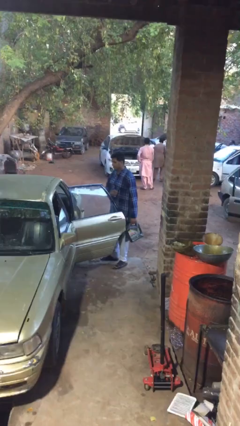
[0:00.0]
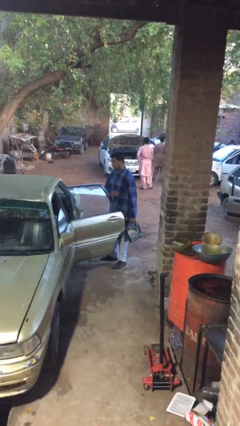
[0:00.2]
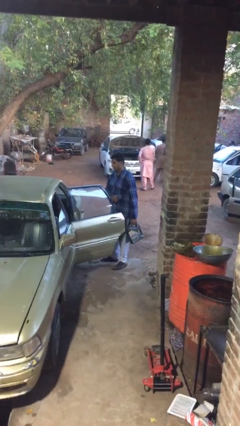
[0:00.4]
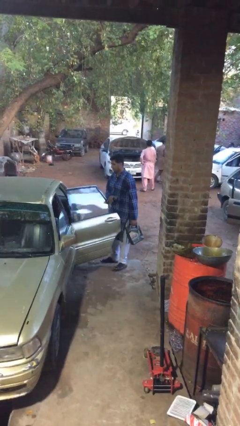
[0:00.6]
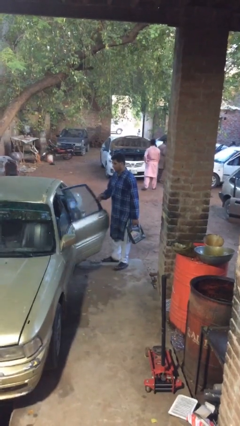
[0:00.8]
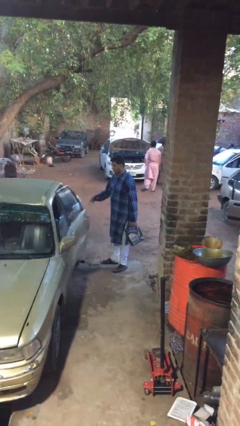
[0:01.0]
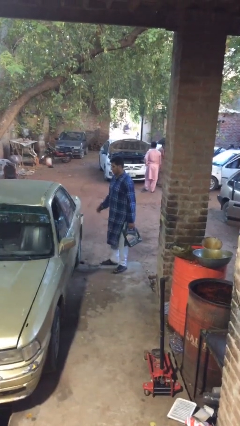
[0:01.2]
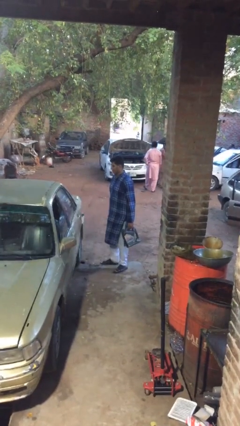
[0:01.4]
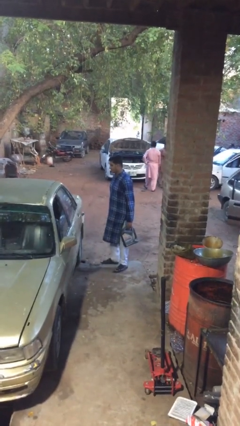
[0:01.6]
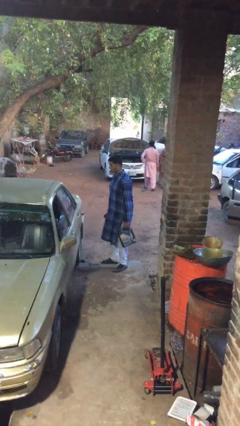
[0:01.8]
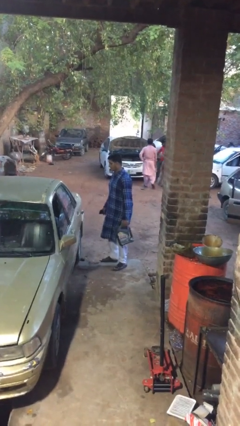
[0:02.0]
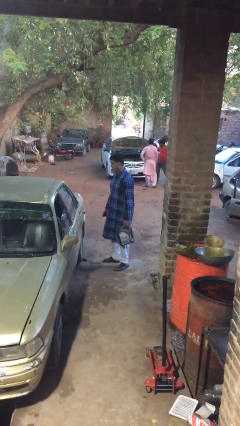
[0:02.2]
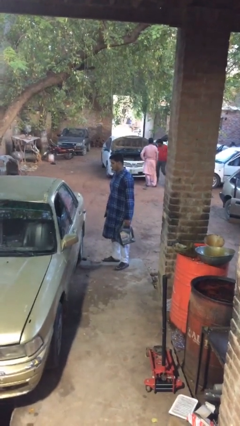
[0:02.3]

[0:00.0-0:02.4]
person closes car door

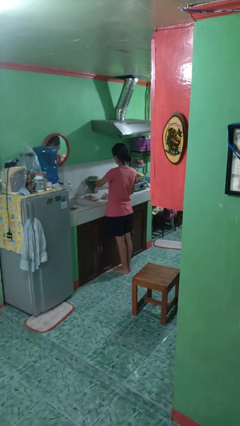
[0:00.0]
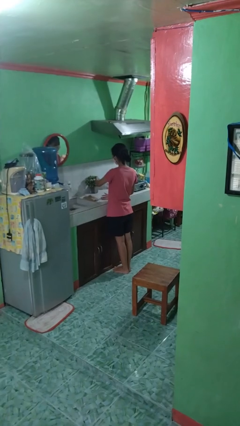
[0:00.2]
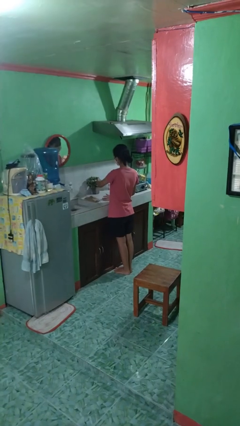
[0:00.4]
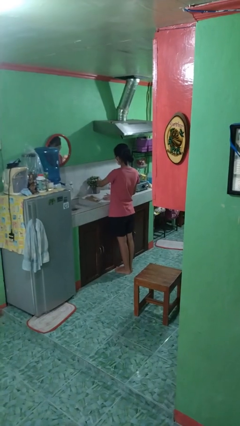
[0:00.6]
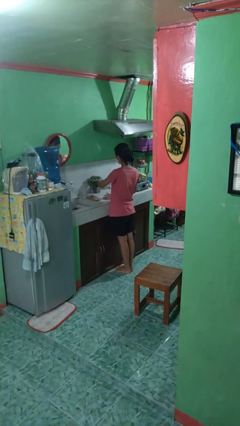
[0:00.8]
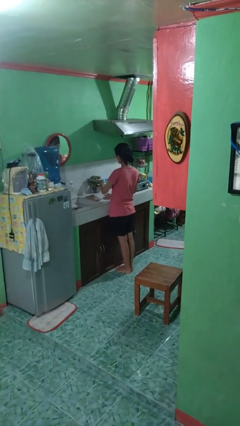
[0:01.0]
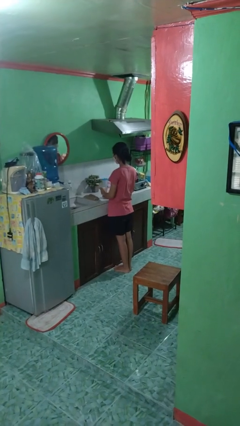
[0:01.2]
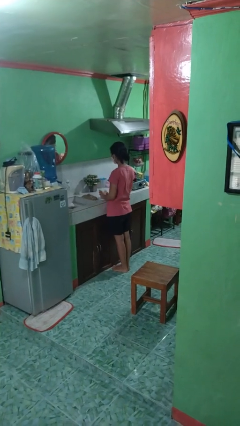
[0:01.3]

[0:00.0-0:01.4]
person waters houseplant

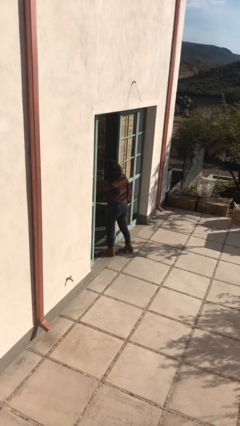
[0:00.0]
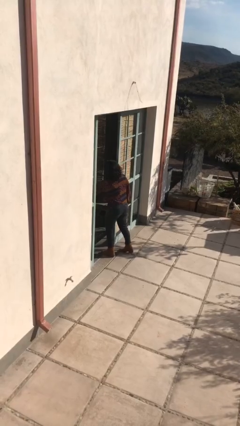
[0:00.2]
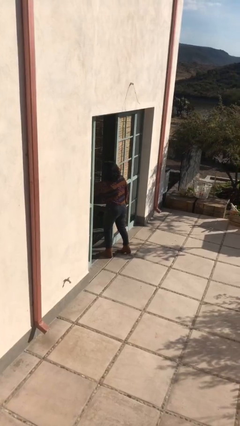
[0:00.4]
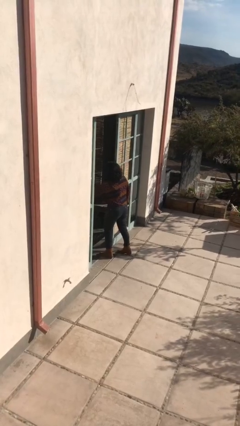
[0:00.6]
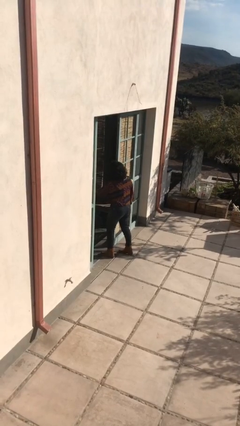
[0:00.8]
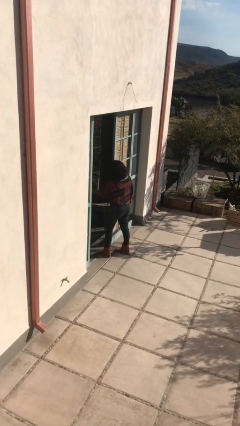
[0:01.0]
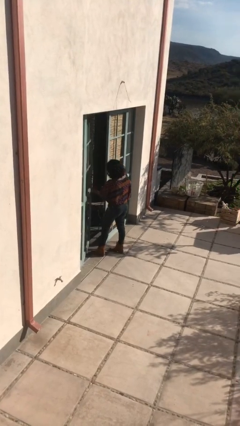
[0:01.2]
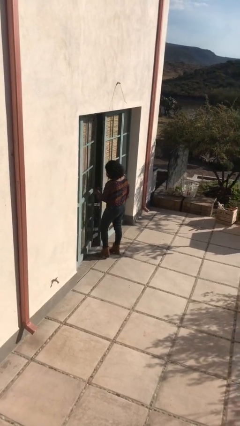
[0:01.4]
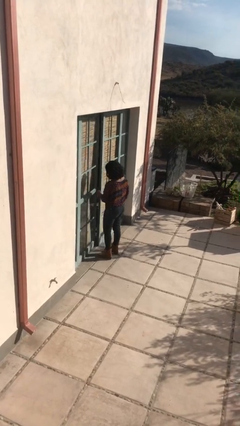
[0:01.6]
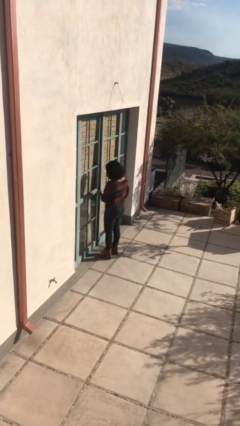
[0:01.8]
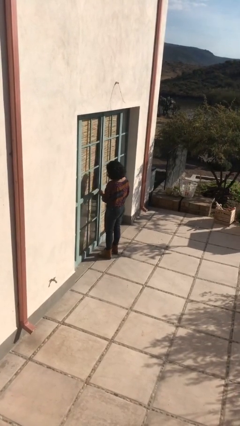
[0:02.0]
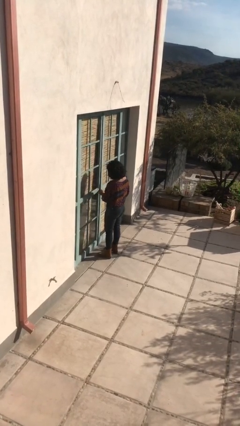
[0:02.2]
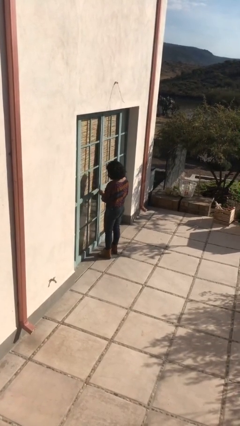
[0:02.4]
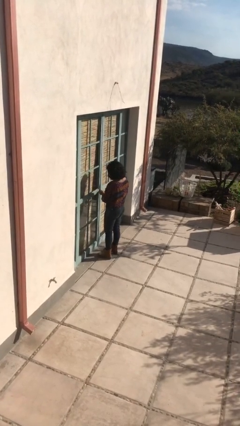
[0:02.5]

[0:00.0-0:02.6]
person closes facility door

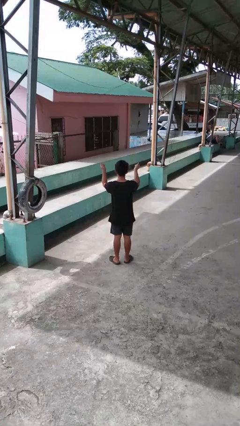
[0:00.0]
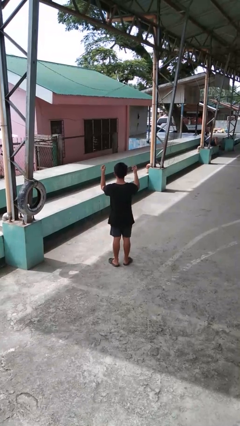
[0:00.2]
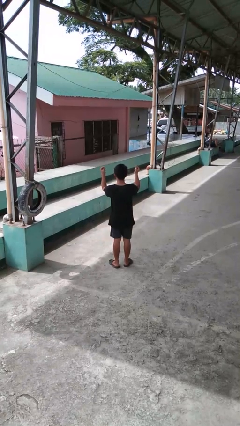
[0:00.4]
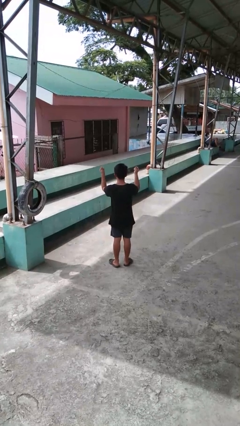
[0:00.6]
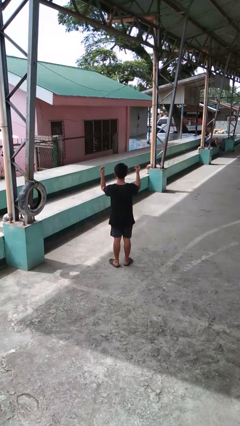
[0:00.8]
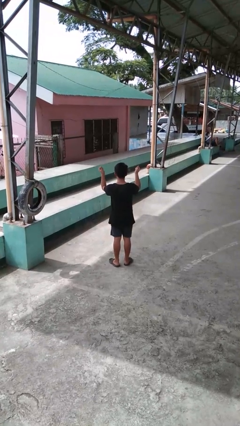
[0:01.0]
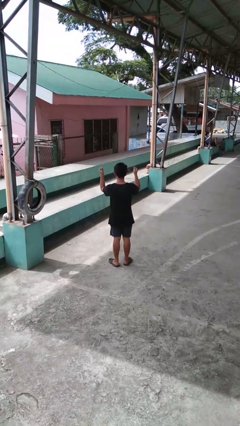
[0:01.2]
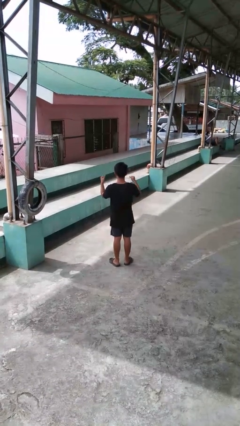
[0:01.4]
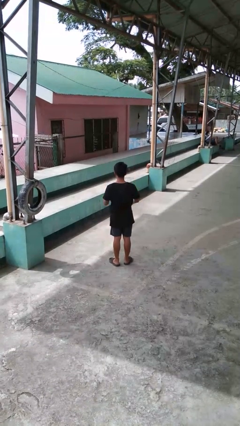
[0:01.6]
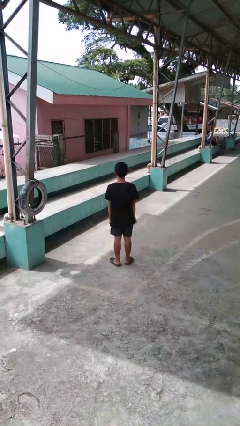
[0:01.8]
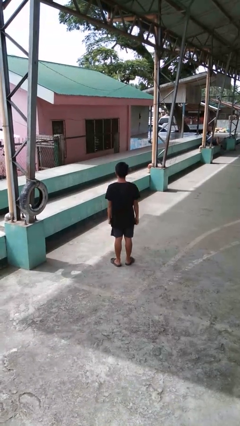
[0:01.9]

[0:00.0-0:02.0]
person snaps fingers

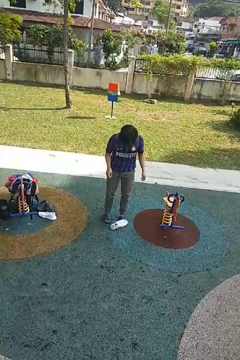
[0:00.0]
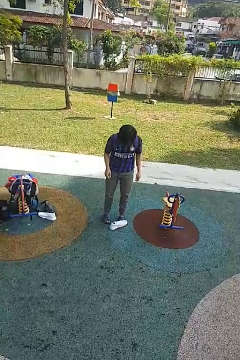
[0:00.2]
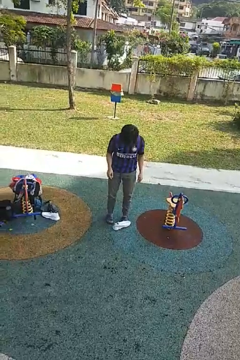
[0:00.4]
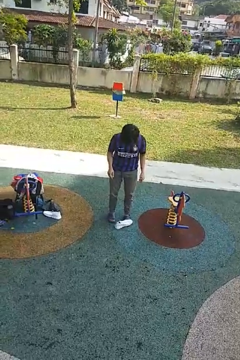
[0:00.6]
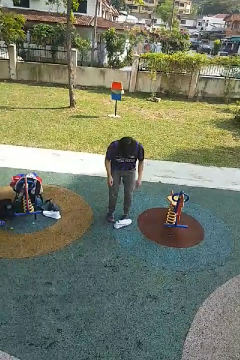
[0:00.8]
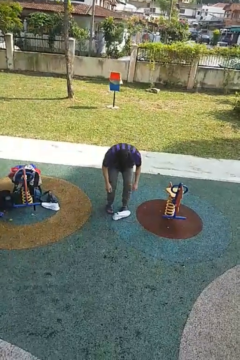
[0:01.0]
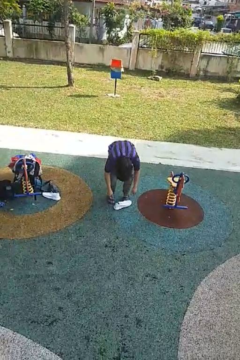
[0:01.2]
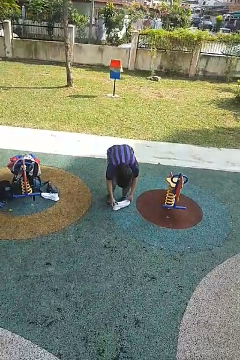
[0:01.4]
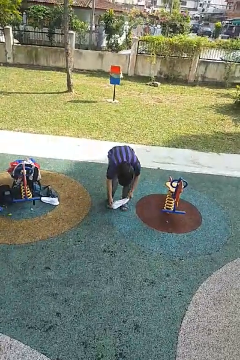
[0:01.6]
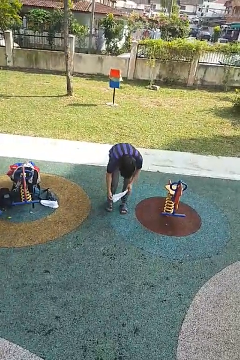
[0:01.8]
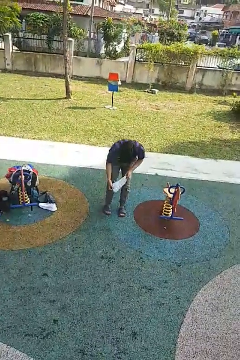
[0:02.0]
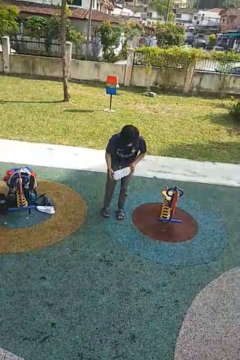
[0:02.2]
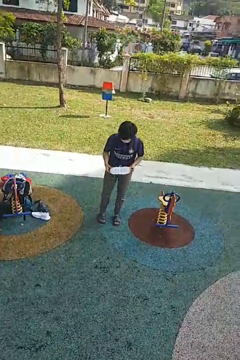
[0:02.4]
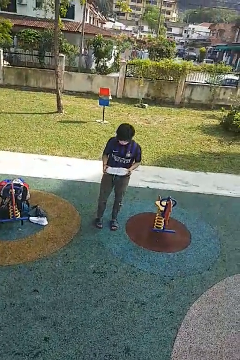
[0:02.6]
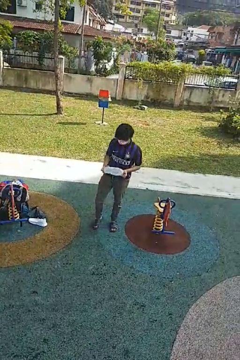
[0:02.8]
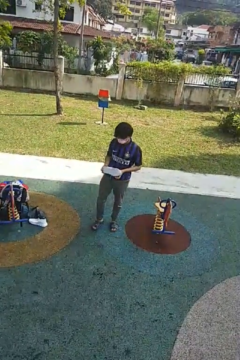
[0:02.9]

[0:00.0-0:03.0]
person picks up object from floor

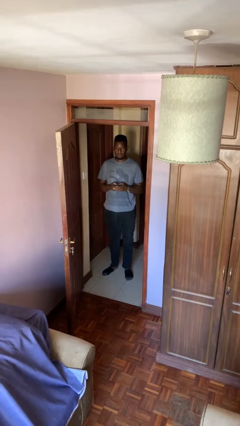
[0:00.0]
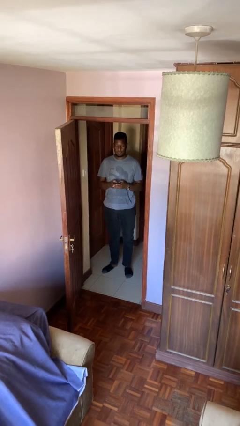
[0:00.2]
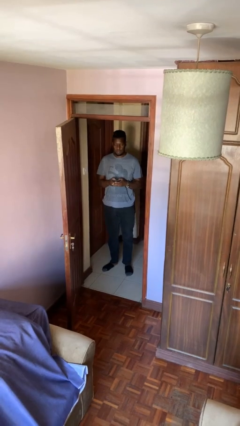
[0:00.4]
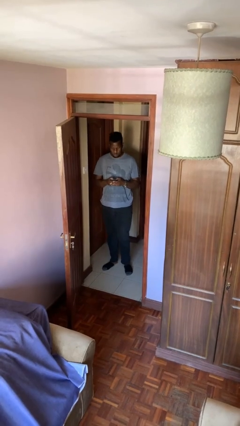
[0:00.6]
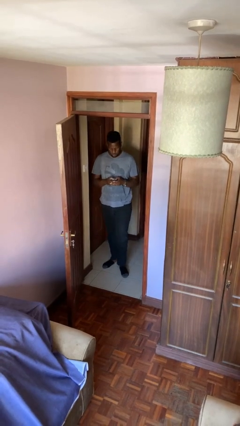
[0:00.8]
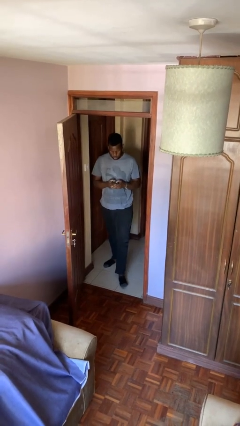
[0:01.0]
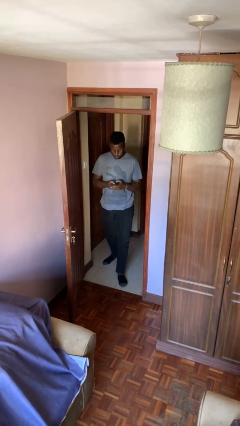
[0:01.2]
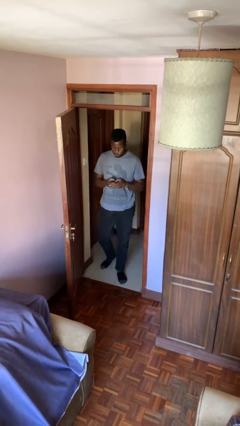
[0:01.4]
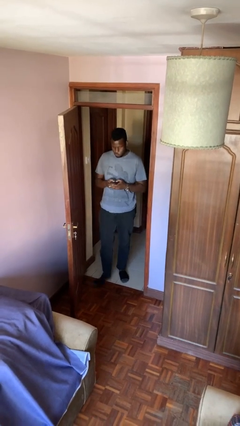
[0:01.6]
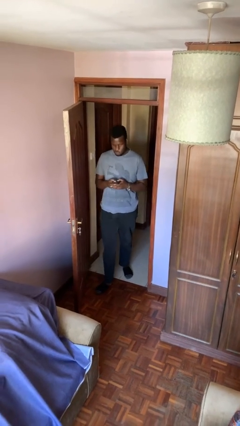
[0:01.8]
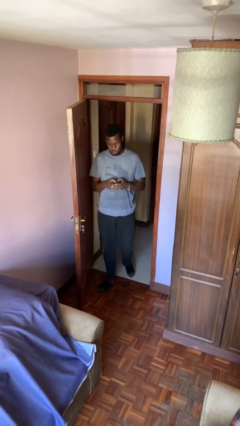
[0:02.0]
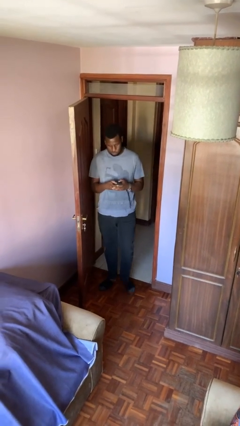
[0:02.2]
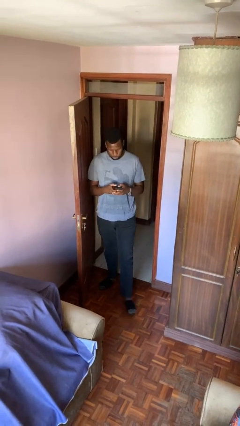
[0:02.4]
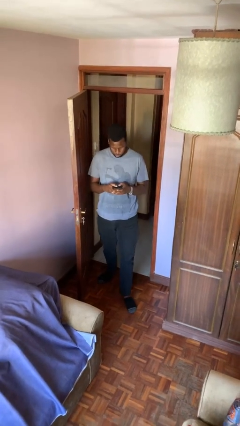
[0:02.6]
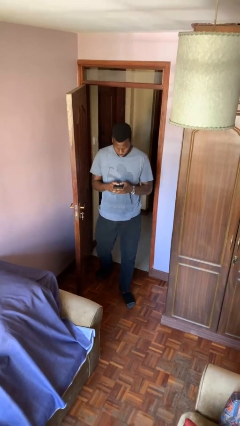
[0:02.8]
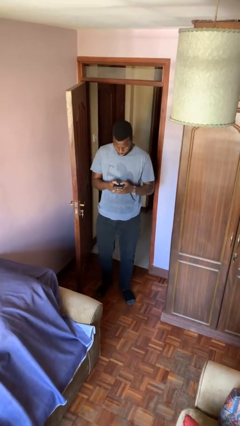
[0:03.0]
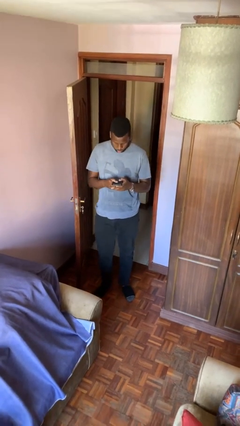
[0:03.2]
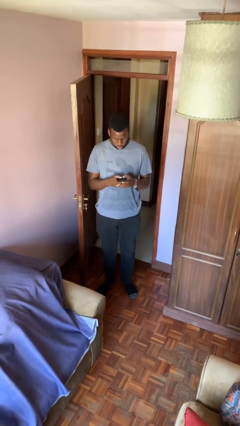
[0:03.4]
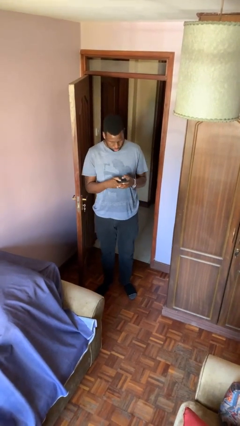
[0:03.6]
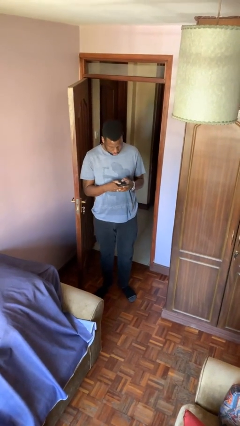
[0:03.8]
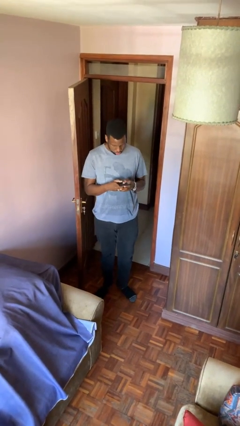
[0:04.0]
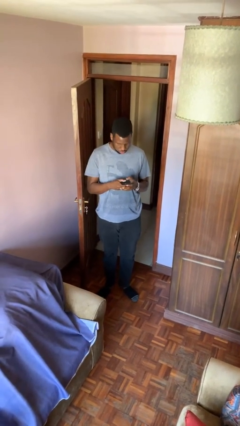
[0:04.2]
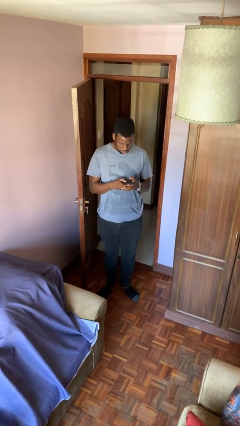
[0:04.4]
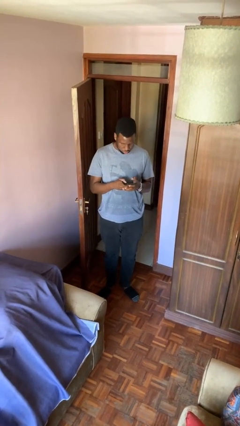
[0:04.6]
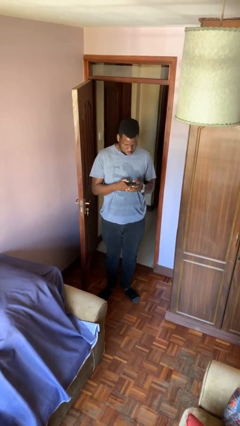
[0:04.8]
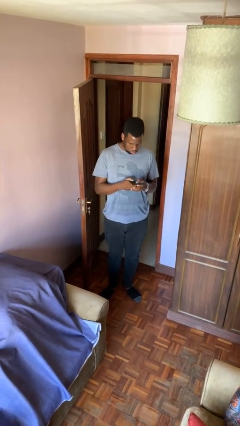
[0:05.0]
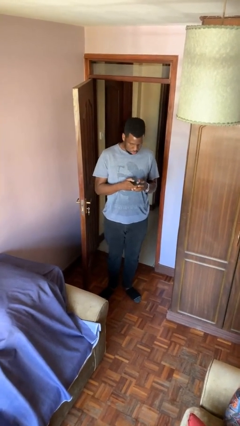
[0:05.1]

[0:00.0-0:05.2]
person enters scene through structure

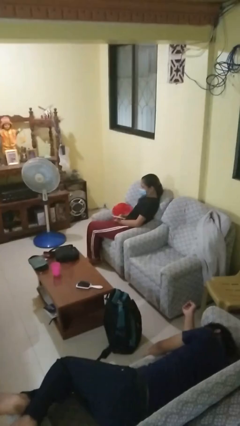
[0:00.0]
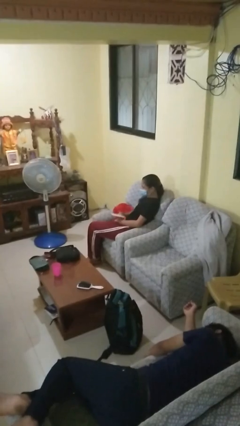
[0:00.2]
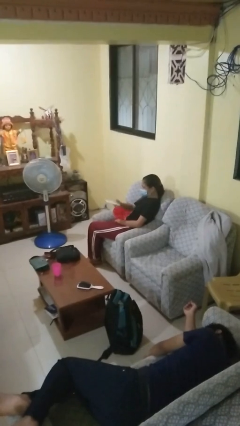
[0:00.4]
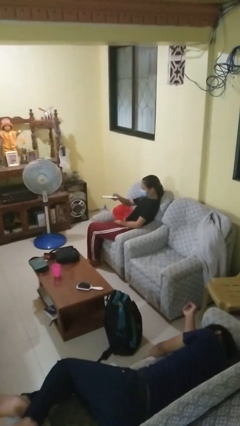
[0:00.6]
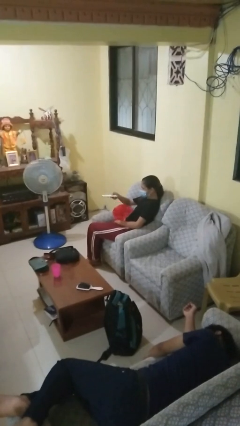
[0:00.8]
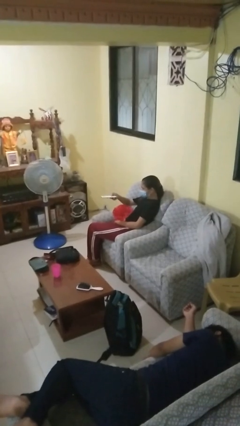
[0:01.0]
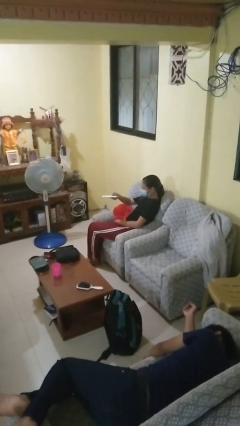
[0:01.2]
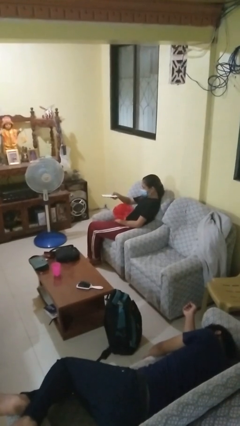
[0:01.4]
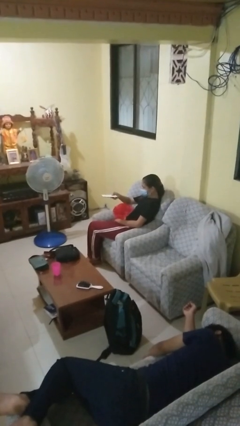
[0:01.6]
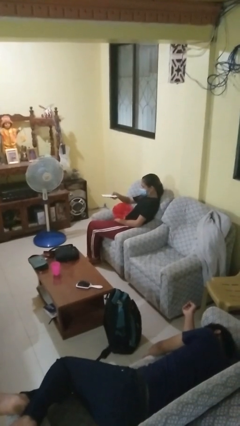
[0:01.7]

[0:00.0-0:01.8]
person uses television remote
